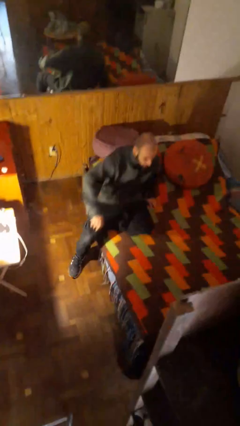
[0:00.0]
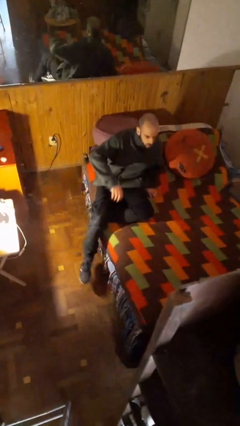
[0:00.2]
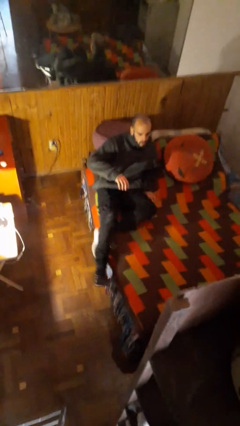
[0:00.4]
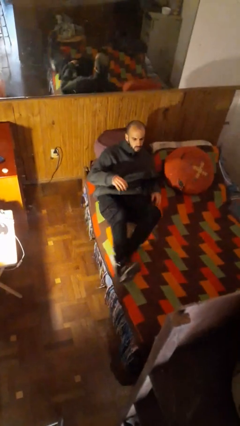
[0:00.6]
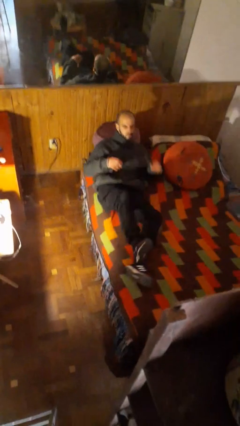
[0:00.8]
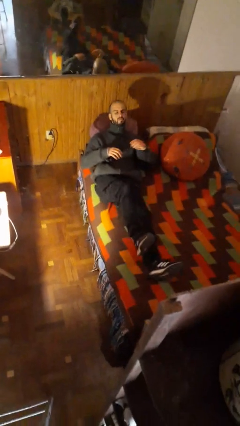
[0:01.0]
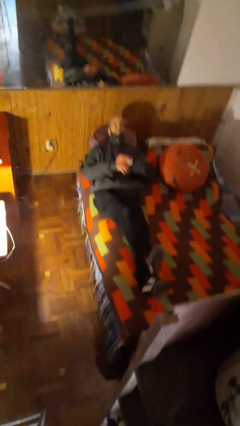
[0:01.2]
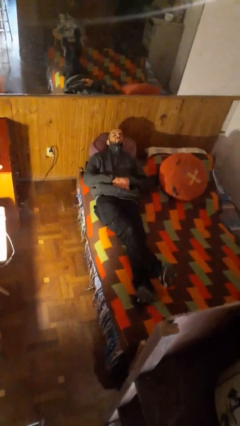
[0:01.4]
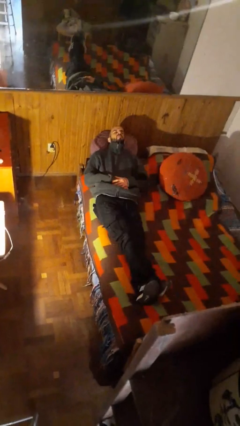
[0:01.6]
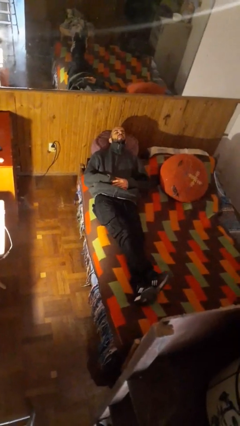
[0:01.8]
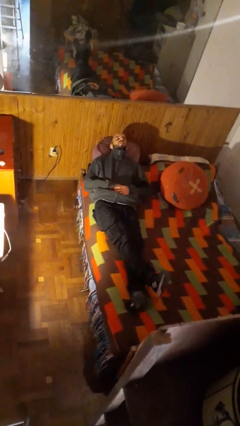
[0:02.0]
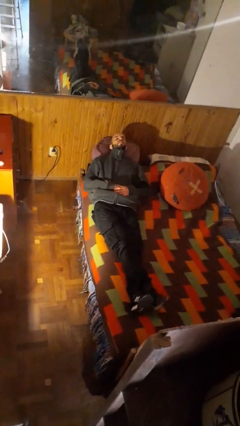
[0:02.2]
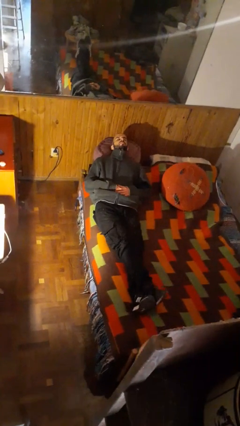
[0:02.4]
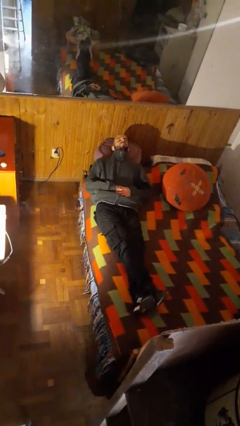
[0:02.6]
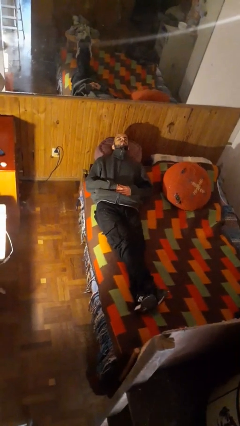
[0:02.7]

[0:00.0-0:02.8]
person lies down on bed

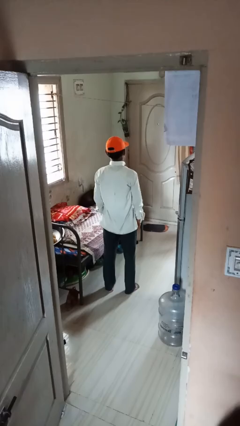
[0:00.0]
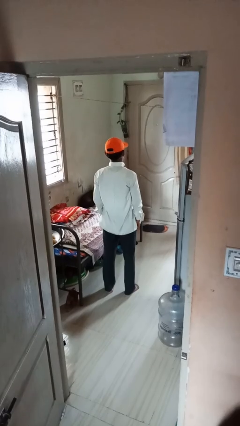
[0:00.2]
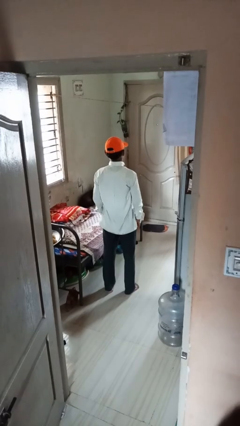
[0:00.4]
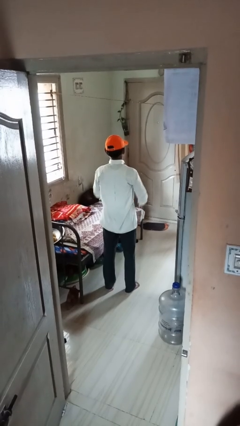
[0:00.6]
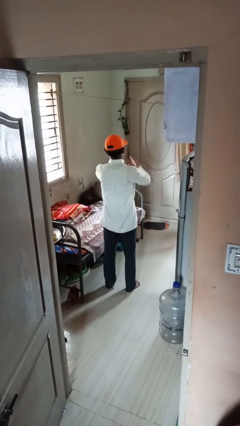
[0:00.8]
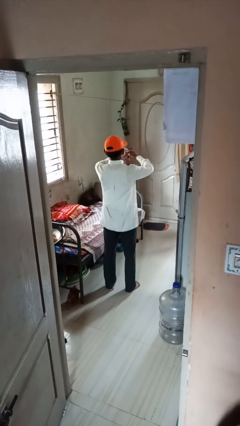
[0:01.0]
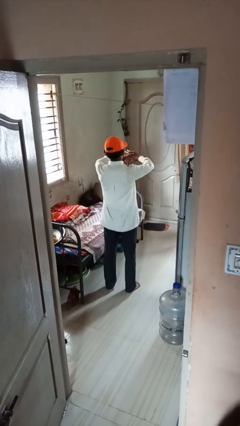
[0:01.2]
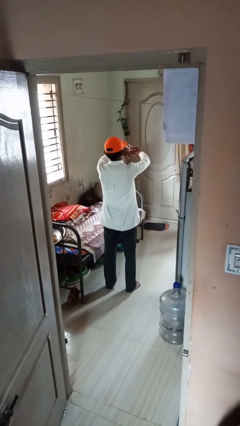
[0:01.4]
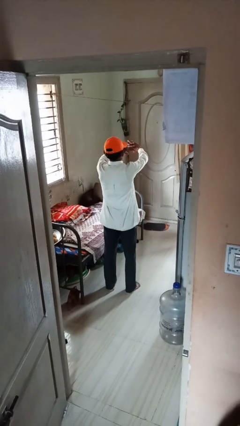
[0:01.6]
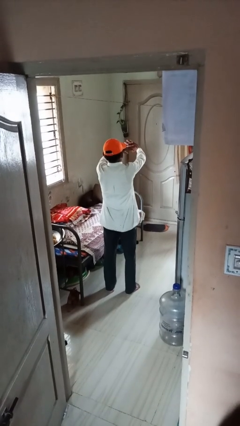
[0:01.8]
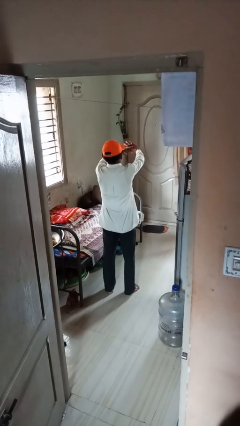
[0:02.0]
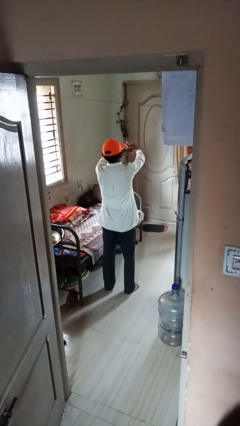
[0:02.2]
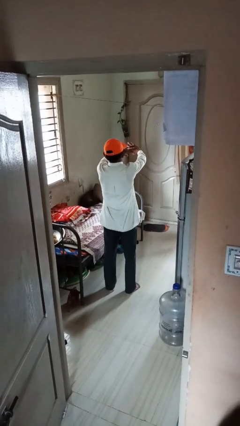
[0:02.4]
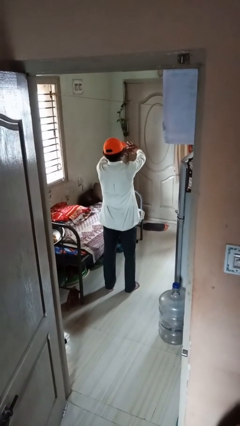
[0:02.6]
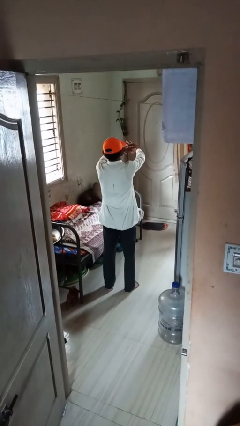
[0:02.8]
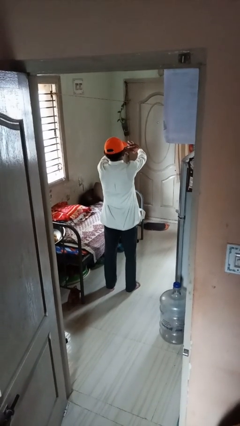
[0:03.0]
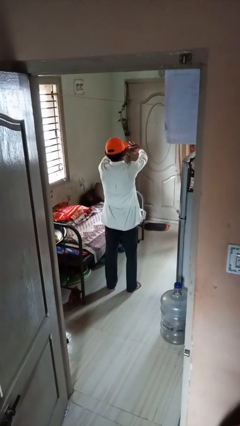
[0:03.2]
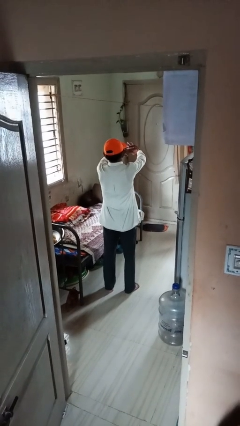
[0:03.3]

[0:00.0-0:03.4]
person cracks knuckles

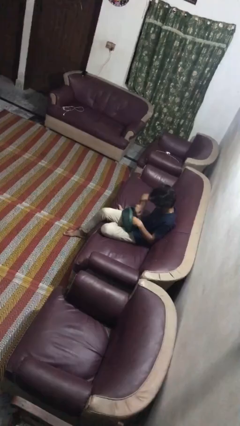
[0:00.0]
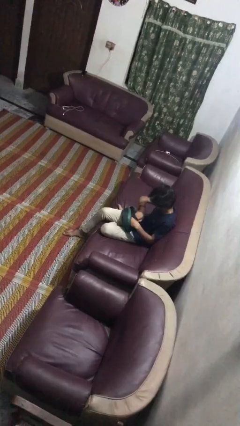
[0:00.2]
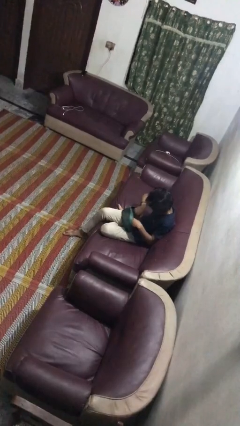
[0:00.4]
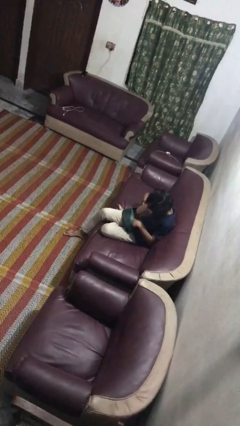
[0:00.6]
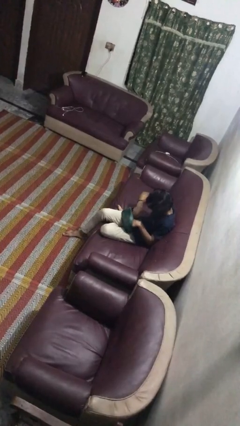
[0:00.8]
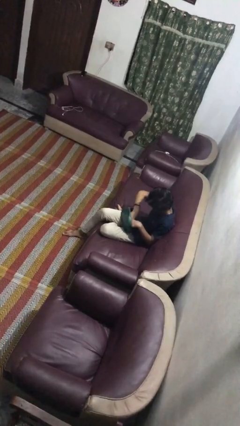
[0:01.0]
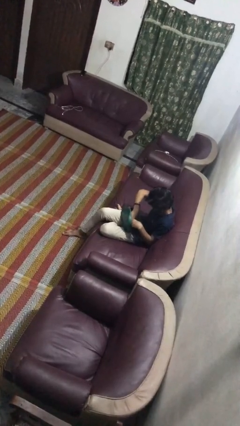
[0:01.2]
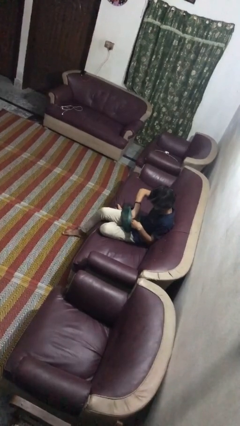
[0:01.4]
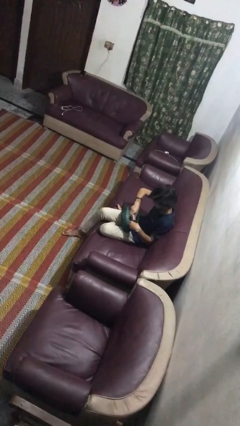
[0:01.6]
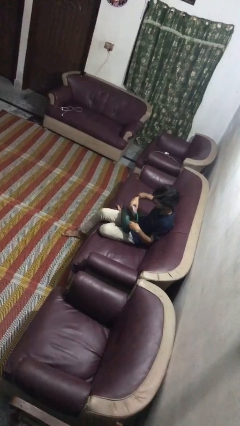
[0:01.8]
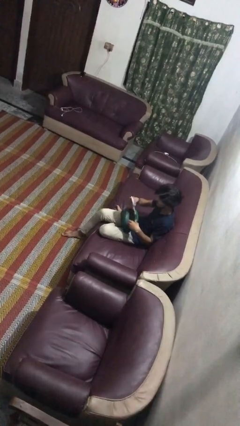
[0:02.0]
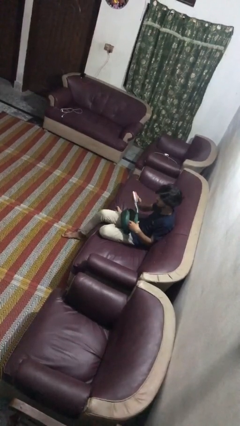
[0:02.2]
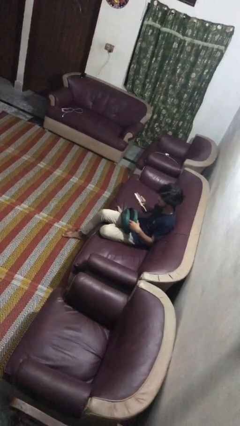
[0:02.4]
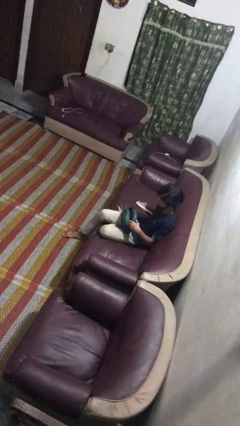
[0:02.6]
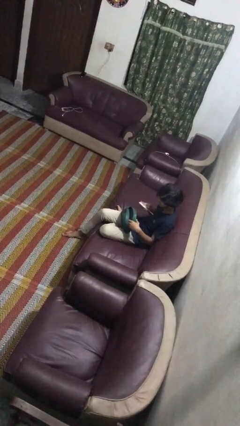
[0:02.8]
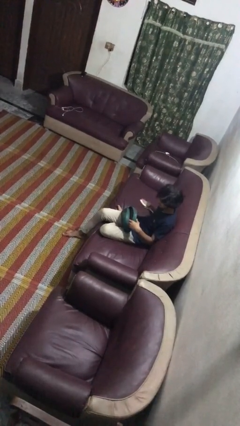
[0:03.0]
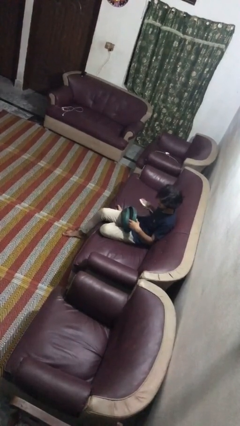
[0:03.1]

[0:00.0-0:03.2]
person takes object from purse

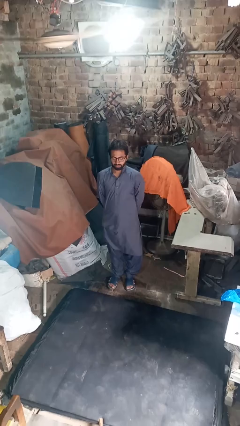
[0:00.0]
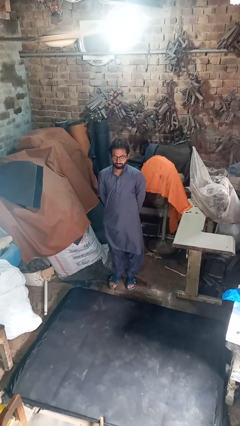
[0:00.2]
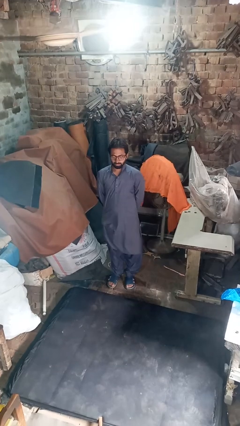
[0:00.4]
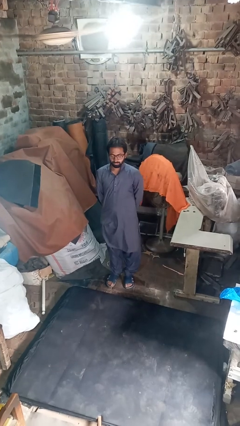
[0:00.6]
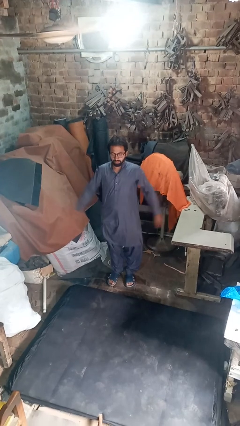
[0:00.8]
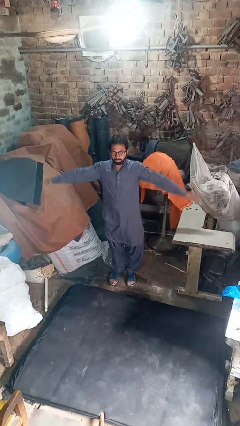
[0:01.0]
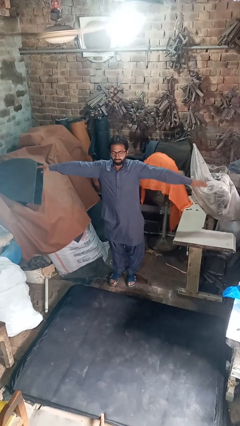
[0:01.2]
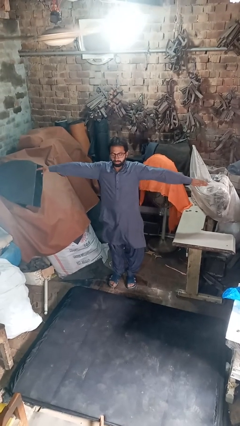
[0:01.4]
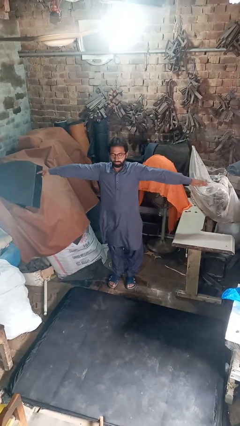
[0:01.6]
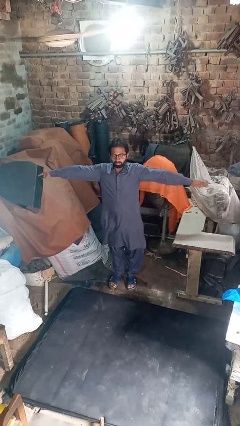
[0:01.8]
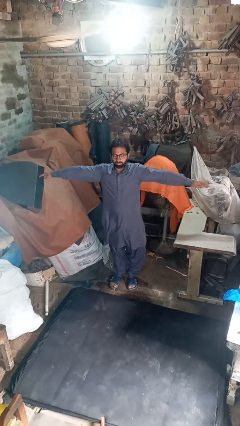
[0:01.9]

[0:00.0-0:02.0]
person stretches arms to side

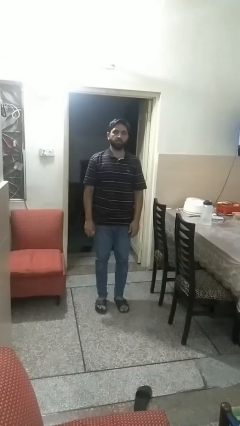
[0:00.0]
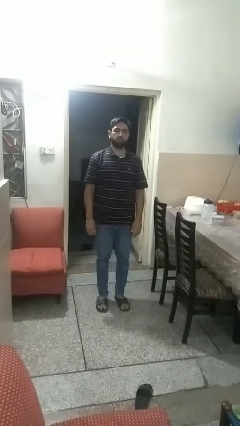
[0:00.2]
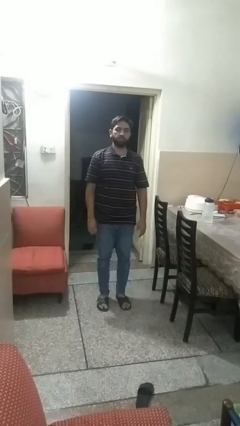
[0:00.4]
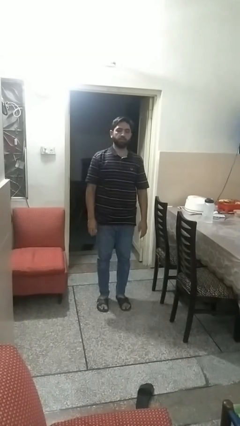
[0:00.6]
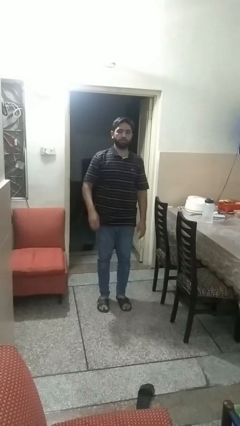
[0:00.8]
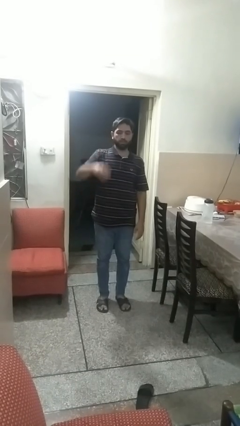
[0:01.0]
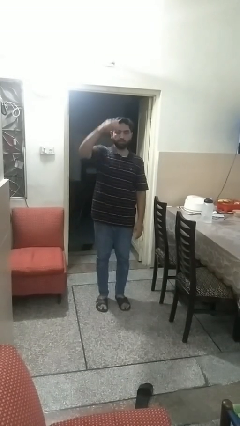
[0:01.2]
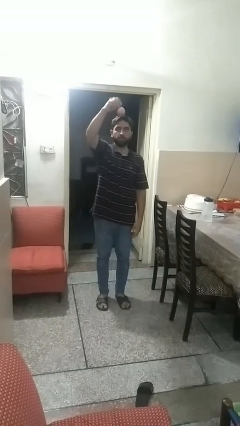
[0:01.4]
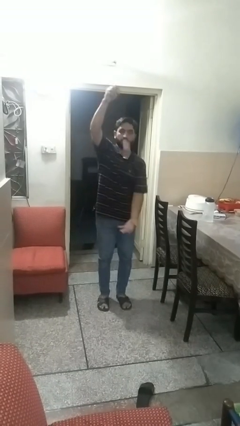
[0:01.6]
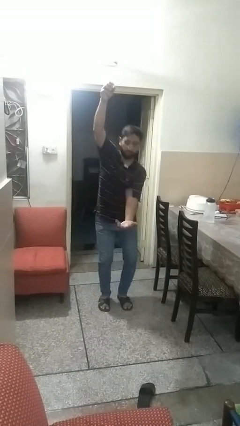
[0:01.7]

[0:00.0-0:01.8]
person drops object

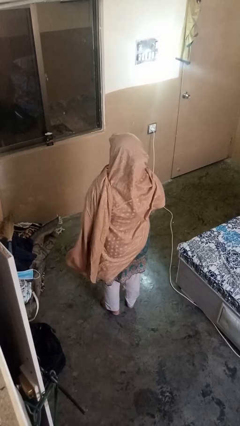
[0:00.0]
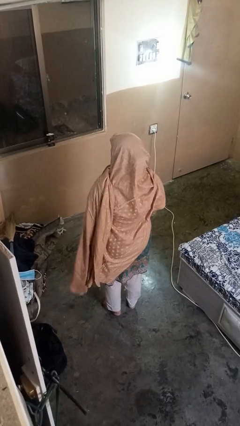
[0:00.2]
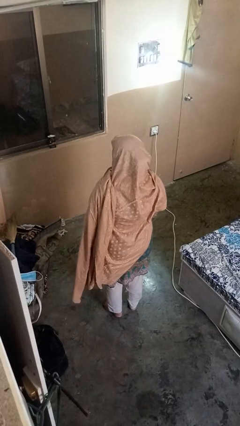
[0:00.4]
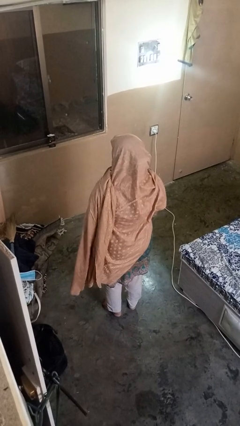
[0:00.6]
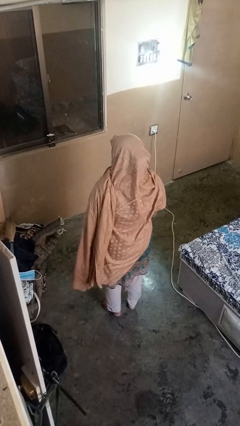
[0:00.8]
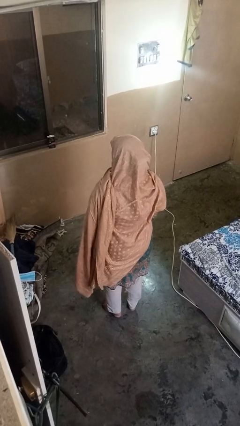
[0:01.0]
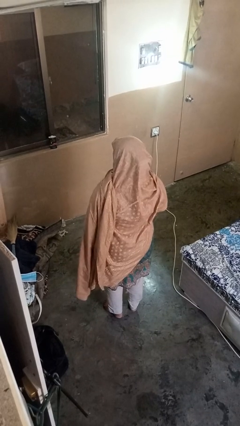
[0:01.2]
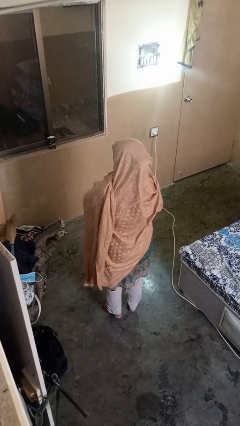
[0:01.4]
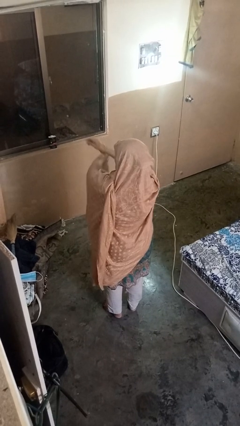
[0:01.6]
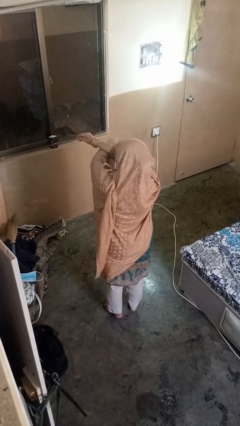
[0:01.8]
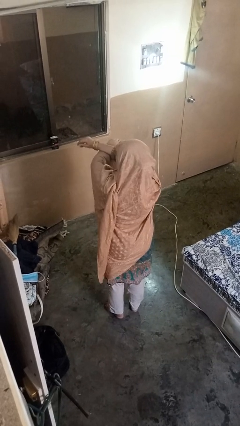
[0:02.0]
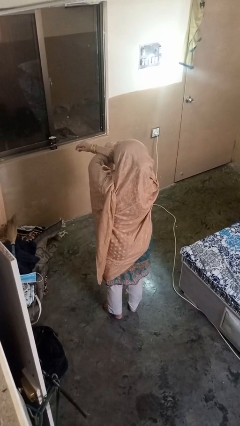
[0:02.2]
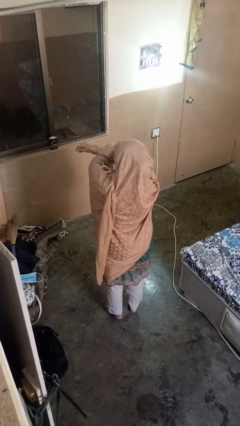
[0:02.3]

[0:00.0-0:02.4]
person crosses arms

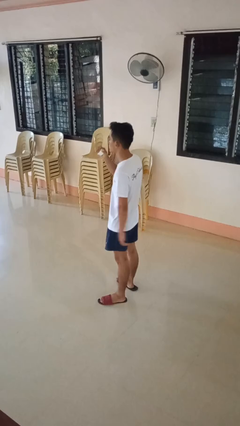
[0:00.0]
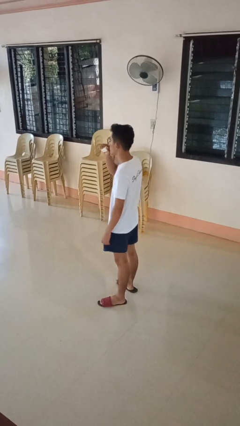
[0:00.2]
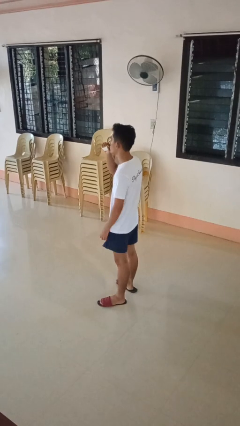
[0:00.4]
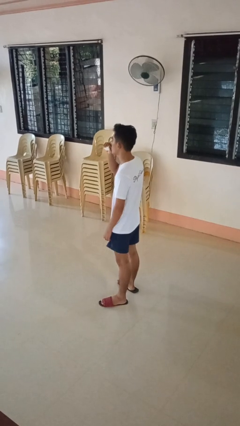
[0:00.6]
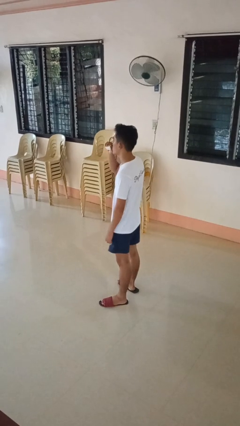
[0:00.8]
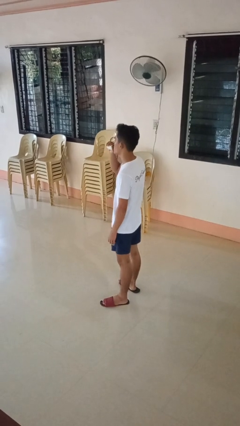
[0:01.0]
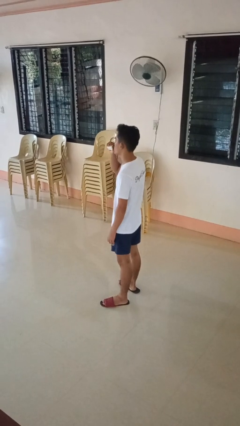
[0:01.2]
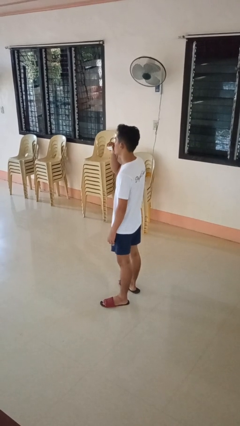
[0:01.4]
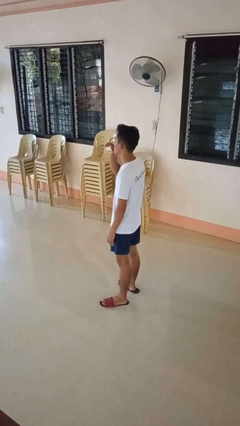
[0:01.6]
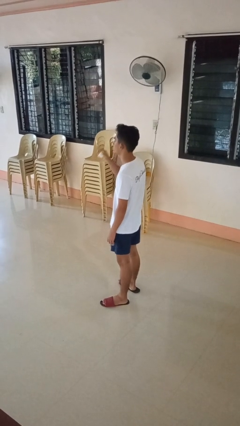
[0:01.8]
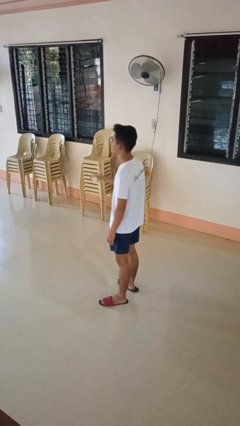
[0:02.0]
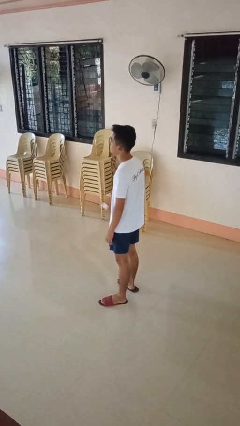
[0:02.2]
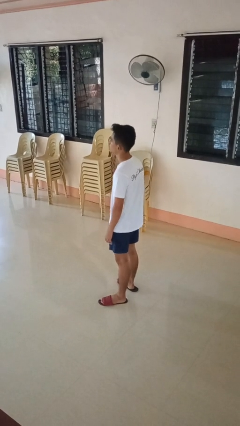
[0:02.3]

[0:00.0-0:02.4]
person vapes
